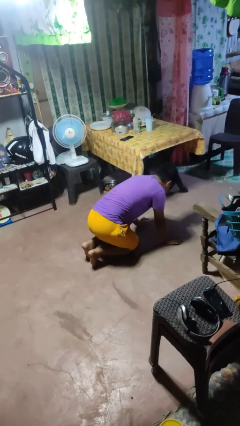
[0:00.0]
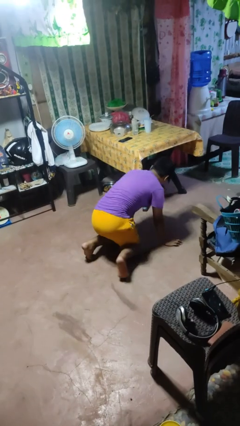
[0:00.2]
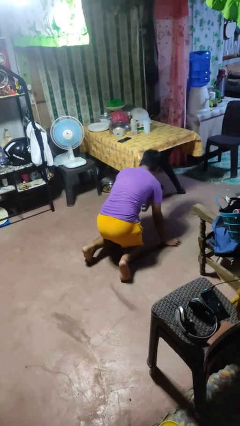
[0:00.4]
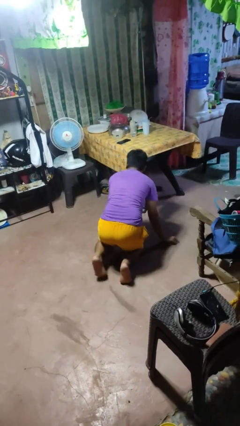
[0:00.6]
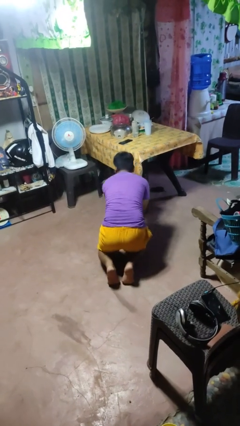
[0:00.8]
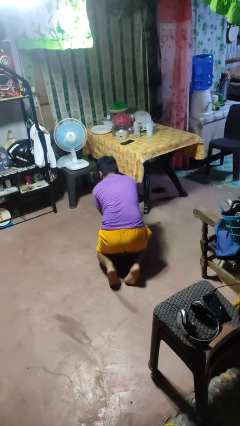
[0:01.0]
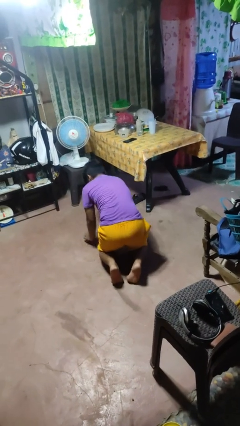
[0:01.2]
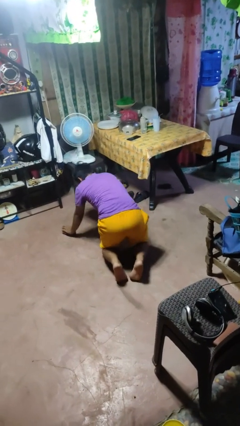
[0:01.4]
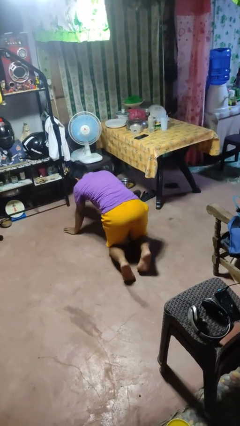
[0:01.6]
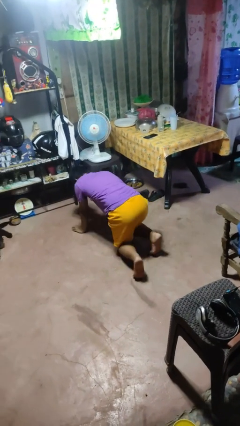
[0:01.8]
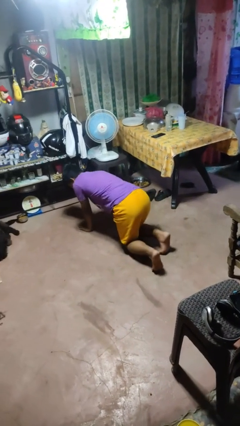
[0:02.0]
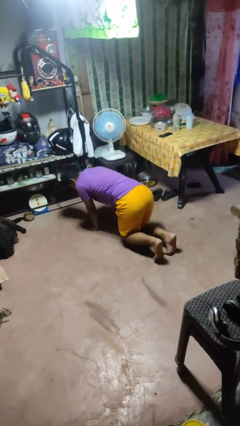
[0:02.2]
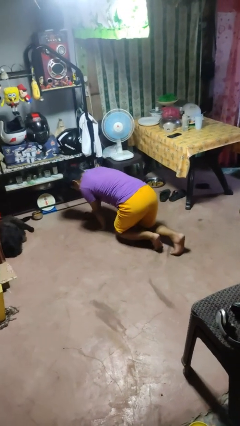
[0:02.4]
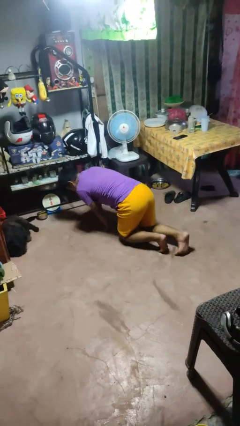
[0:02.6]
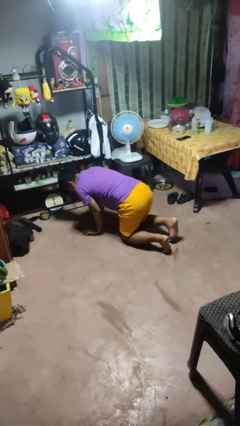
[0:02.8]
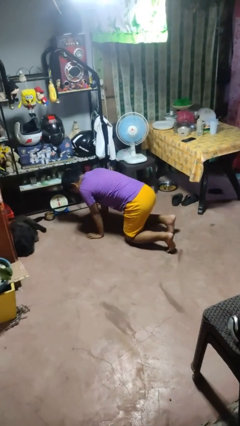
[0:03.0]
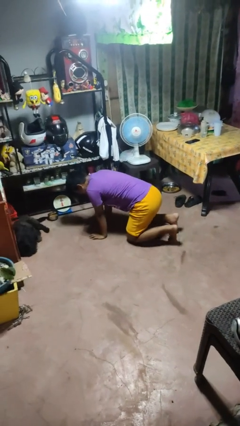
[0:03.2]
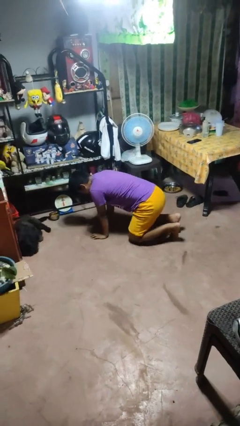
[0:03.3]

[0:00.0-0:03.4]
person crawls

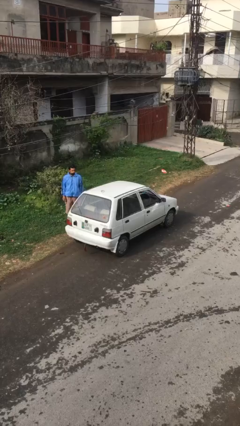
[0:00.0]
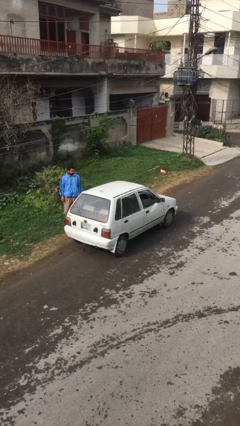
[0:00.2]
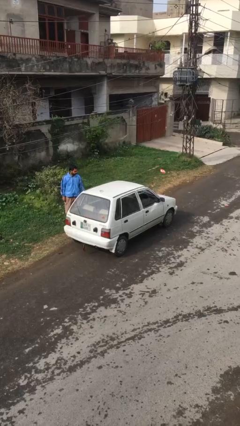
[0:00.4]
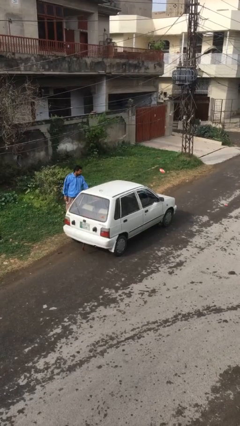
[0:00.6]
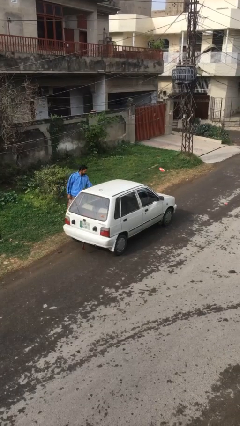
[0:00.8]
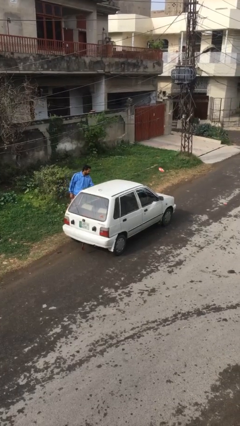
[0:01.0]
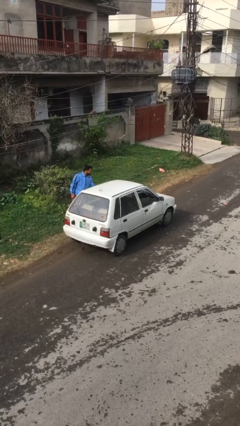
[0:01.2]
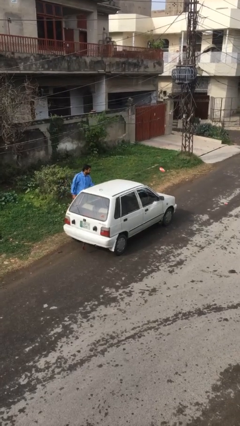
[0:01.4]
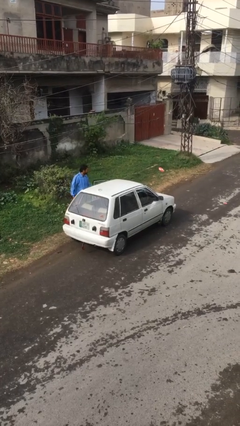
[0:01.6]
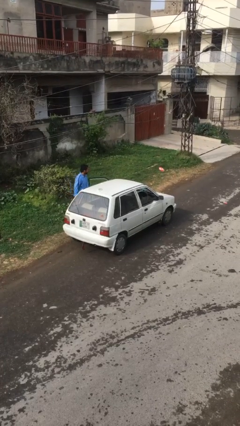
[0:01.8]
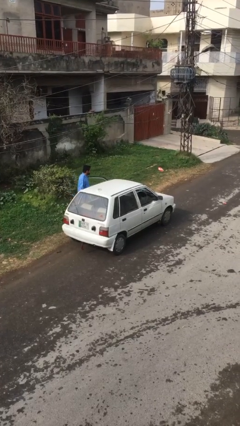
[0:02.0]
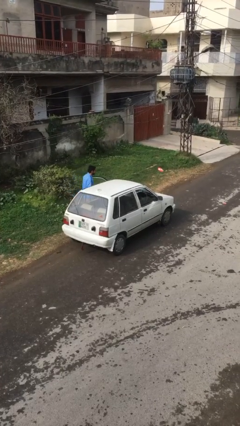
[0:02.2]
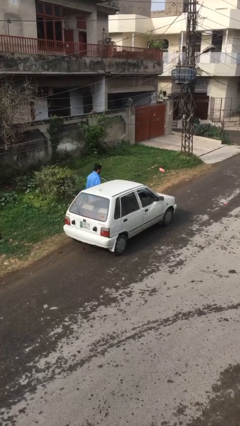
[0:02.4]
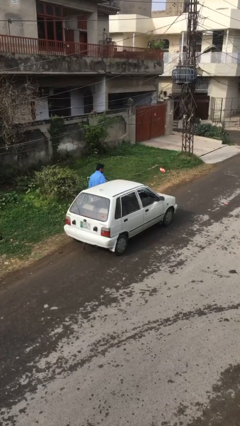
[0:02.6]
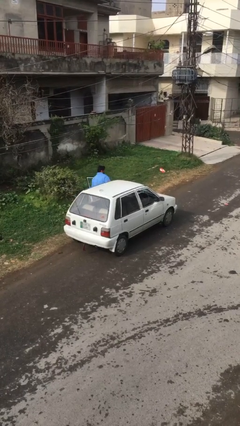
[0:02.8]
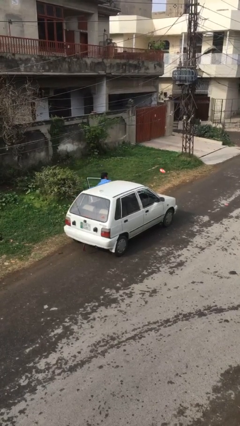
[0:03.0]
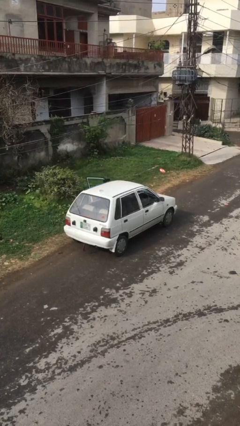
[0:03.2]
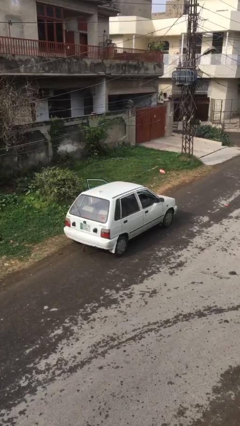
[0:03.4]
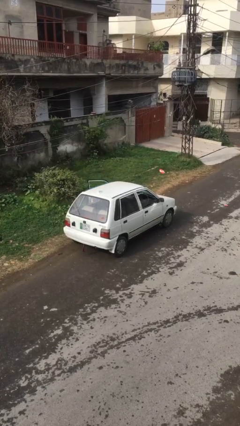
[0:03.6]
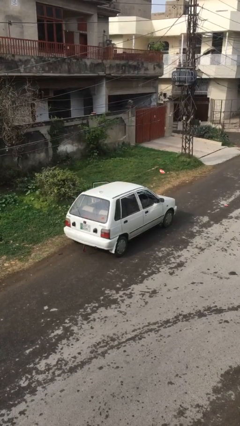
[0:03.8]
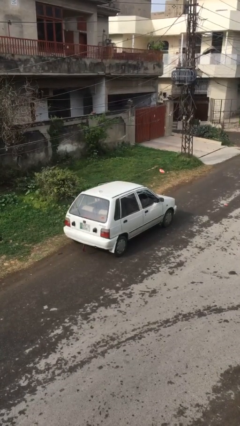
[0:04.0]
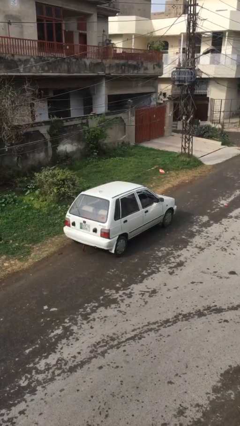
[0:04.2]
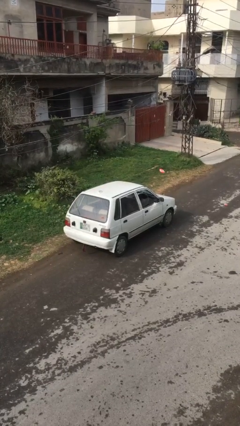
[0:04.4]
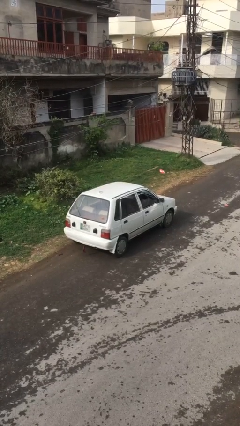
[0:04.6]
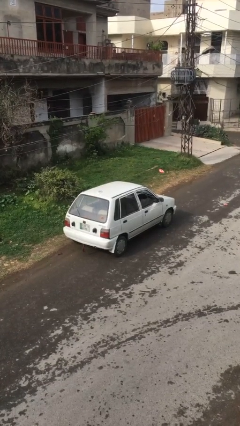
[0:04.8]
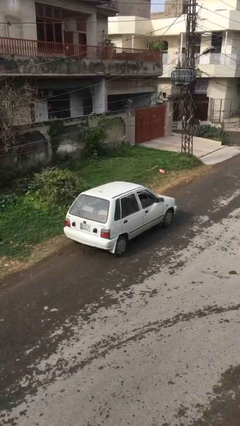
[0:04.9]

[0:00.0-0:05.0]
car picks up person

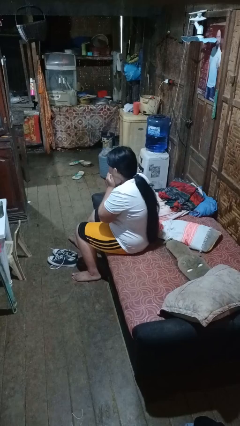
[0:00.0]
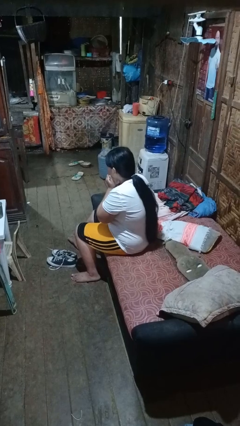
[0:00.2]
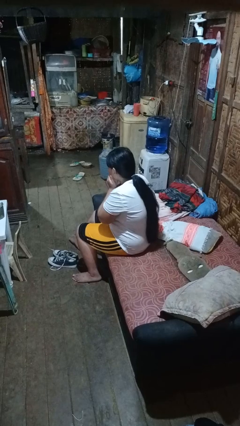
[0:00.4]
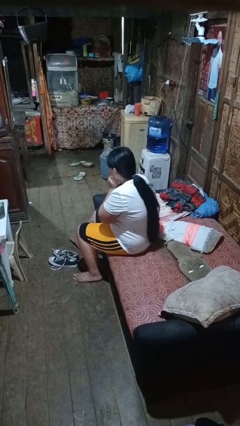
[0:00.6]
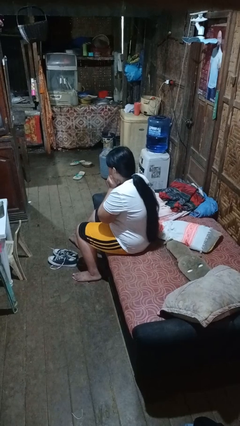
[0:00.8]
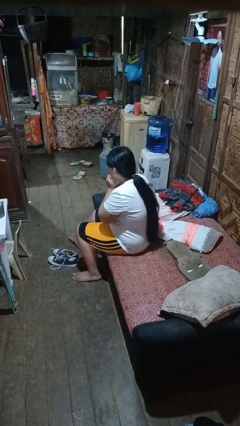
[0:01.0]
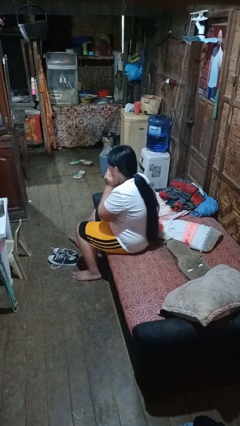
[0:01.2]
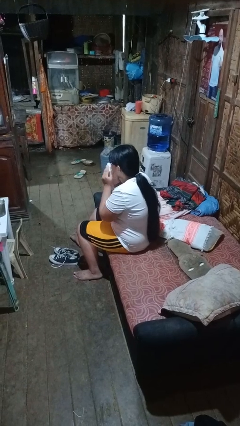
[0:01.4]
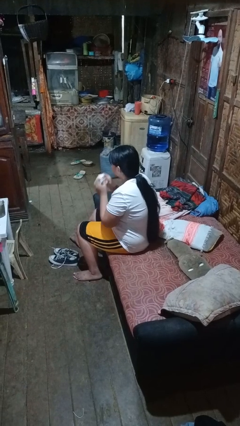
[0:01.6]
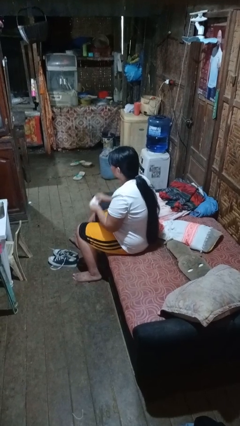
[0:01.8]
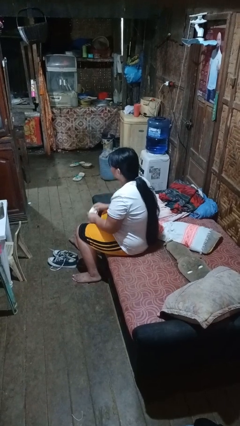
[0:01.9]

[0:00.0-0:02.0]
person blows nose

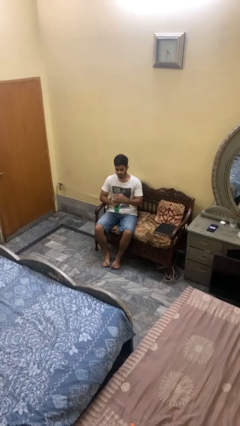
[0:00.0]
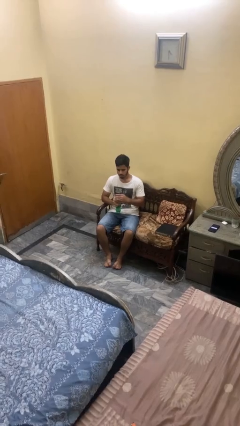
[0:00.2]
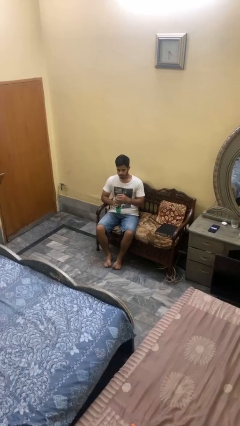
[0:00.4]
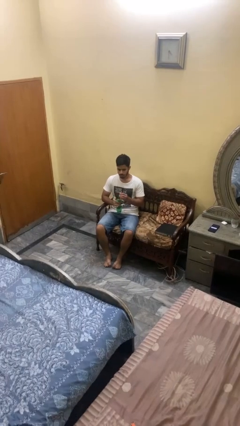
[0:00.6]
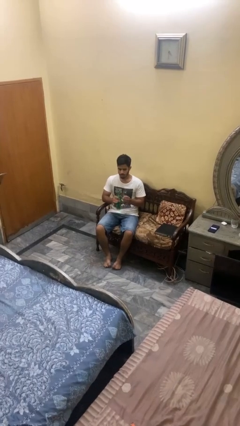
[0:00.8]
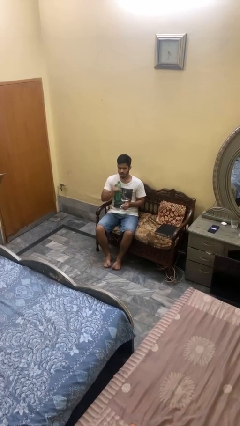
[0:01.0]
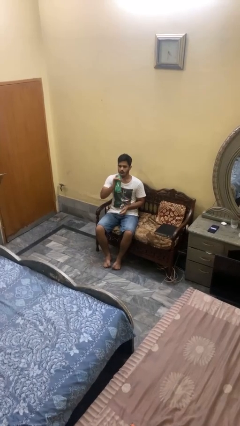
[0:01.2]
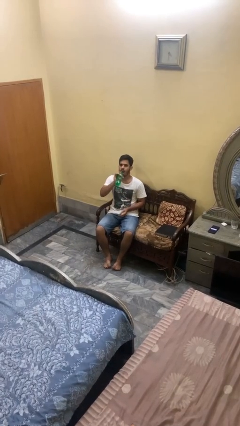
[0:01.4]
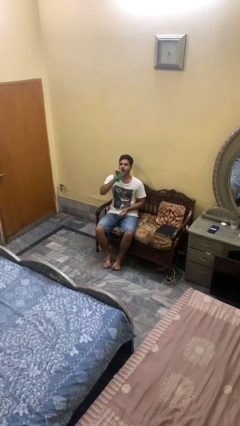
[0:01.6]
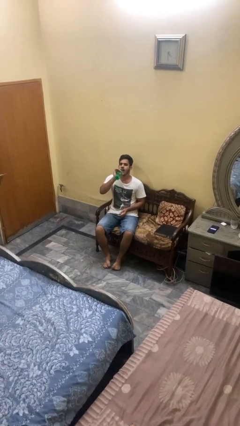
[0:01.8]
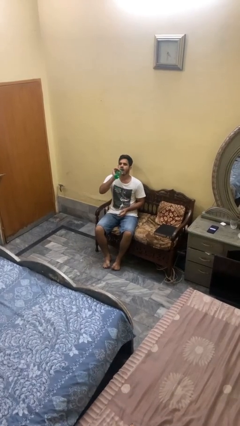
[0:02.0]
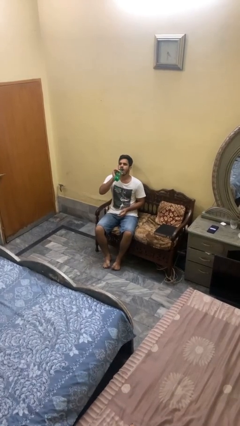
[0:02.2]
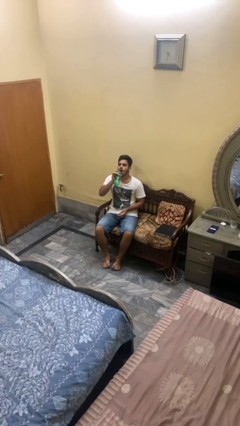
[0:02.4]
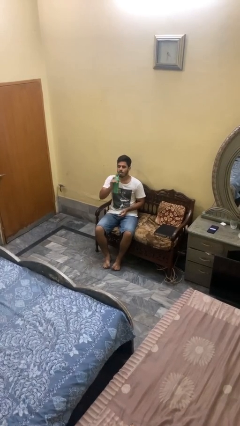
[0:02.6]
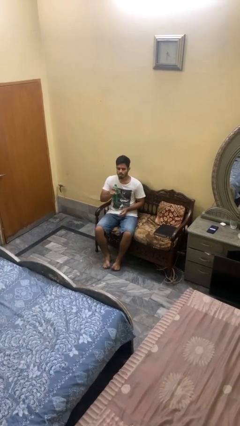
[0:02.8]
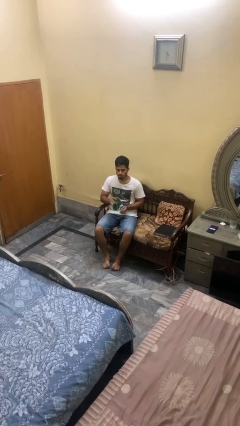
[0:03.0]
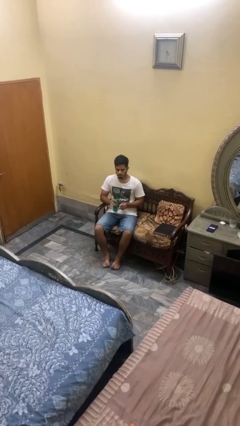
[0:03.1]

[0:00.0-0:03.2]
person drinks from bottle

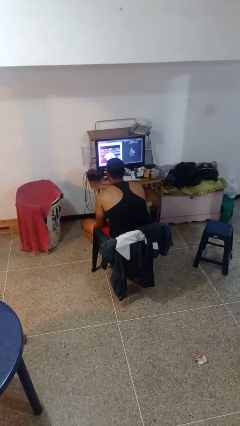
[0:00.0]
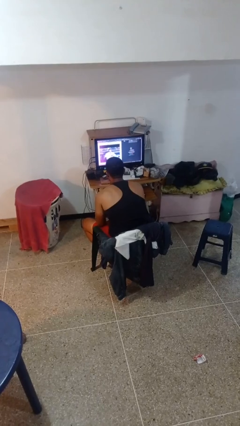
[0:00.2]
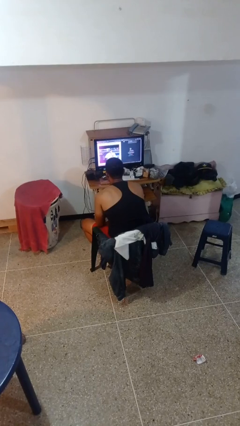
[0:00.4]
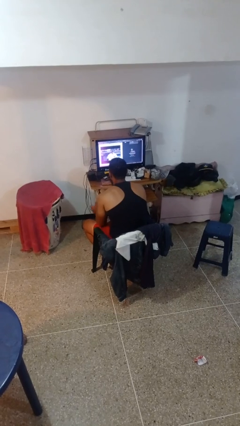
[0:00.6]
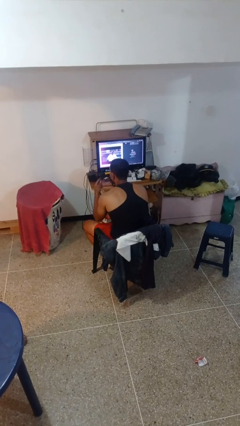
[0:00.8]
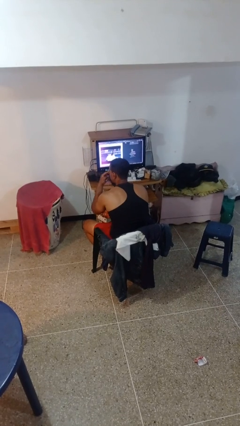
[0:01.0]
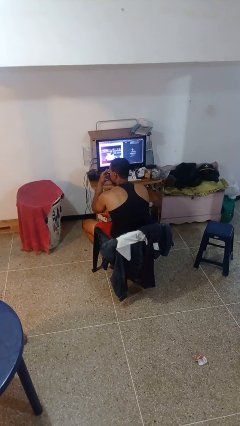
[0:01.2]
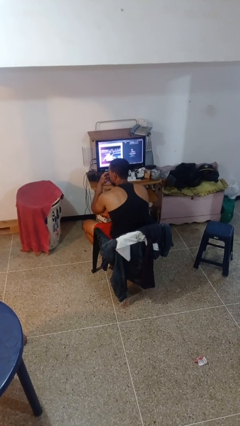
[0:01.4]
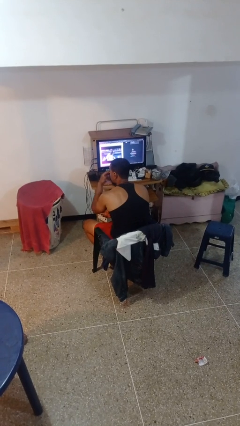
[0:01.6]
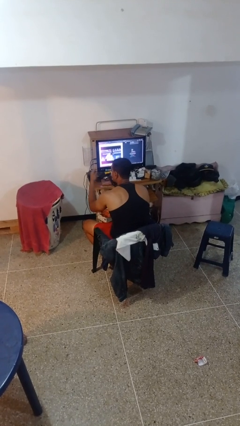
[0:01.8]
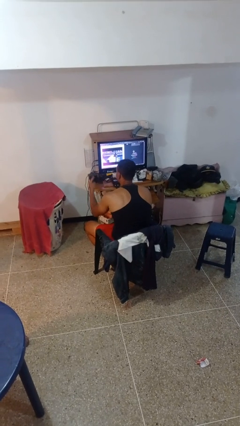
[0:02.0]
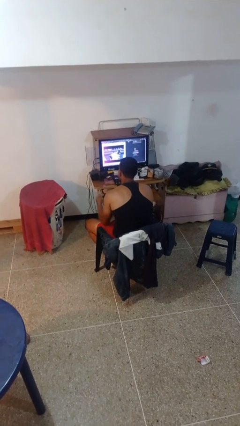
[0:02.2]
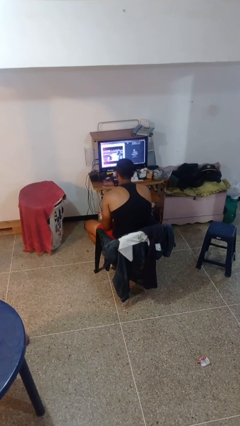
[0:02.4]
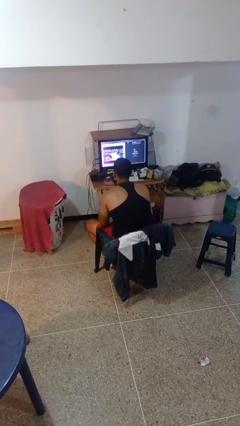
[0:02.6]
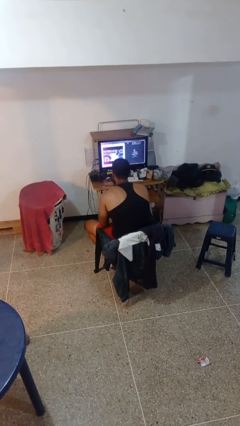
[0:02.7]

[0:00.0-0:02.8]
person gestures watch closely

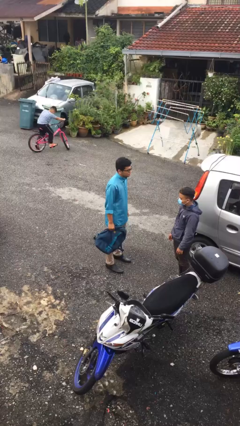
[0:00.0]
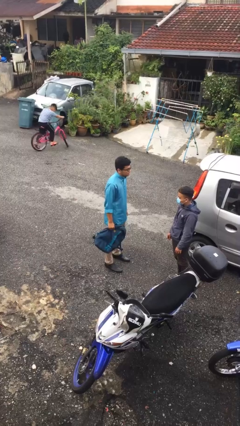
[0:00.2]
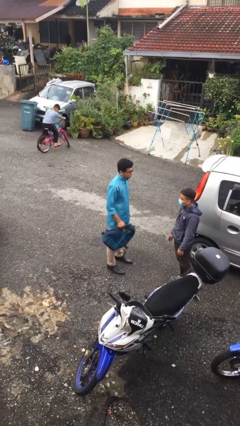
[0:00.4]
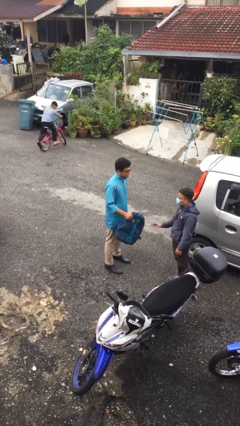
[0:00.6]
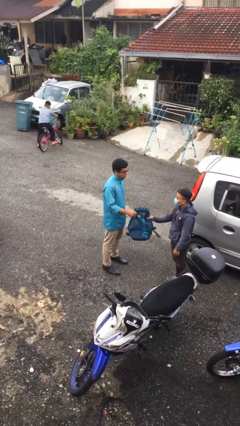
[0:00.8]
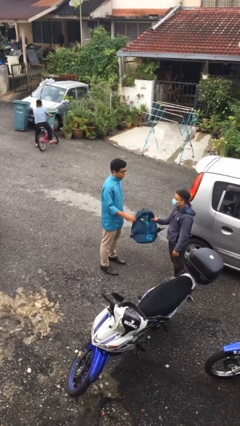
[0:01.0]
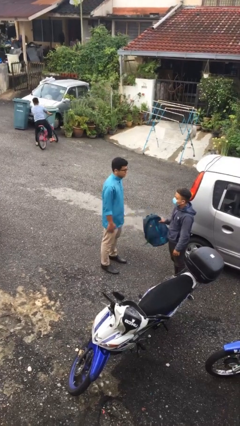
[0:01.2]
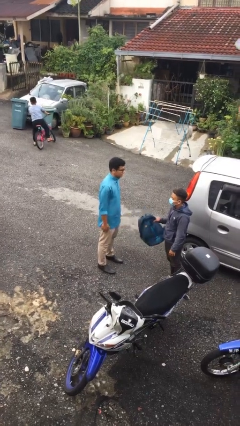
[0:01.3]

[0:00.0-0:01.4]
person transfers object to person
